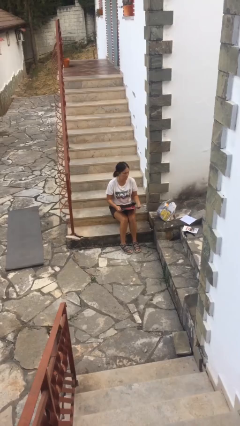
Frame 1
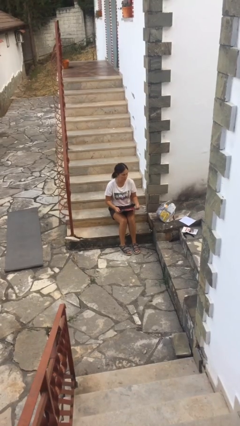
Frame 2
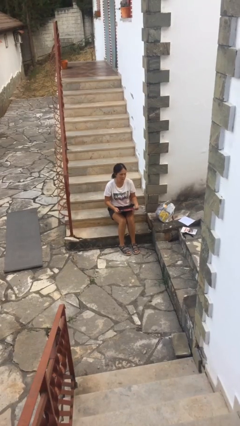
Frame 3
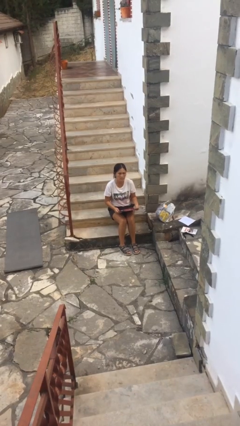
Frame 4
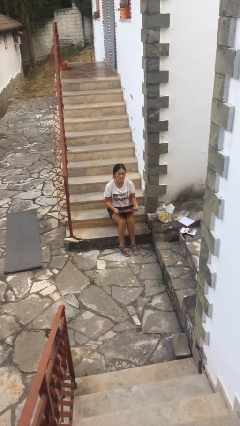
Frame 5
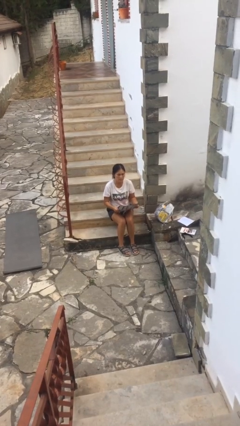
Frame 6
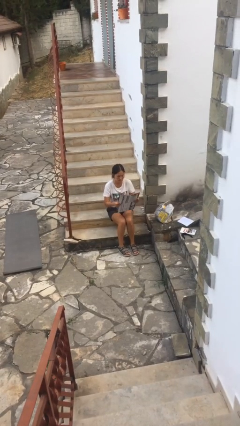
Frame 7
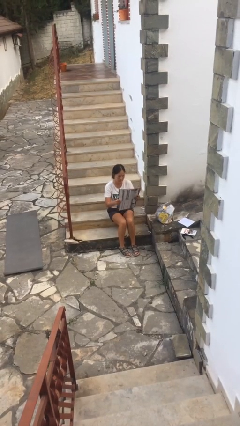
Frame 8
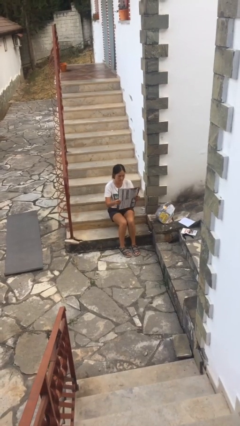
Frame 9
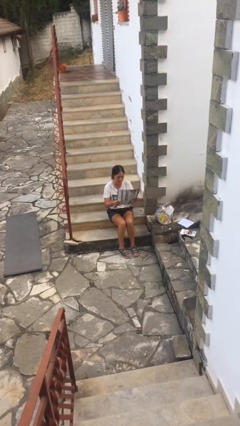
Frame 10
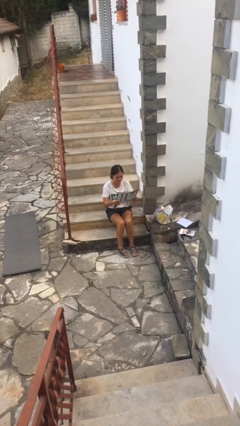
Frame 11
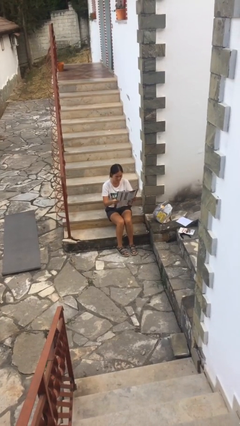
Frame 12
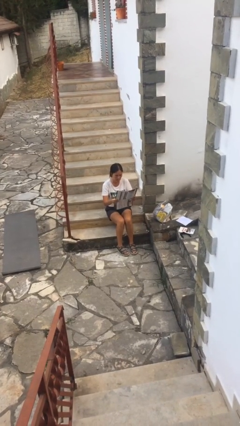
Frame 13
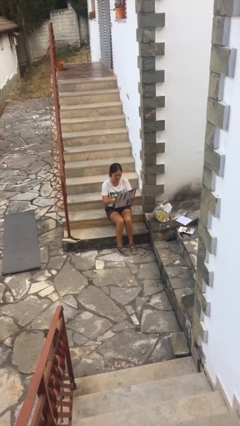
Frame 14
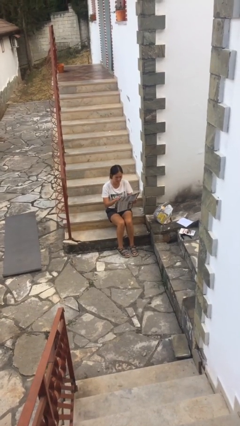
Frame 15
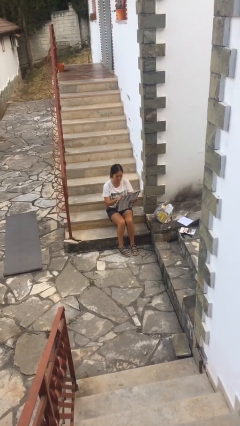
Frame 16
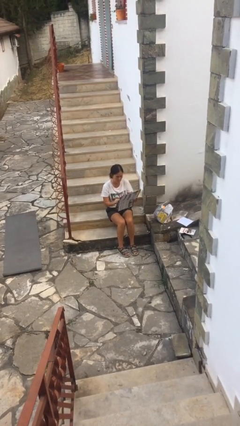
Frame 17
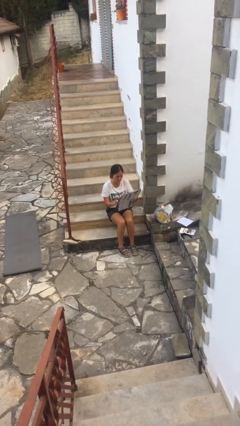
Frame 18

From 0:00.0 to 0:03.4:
person reads newspaper

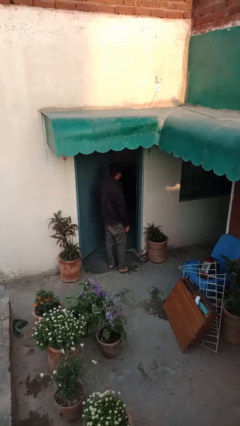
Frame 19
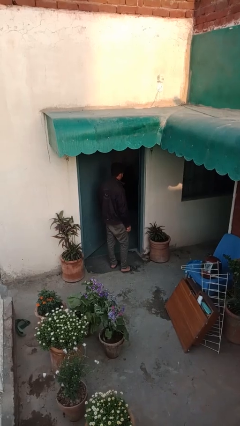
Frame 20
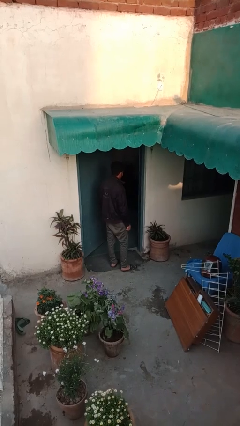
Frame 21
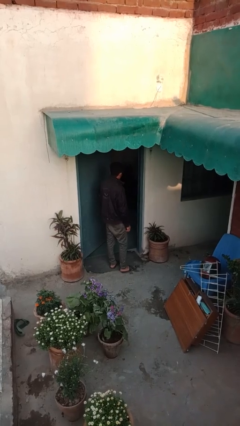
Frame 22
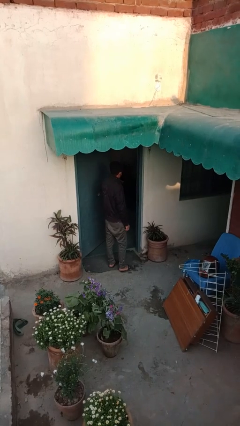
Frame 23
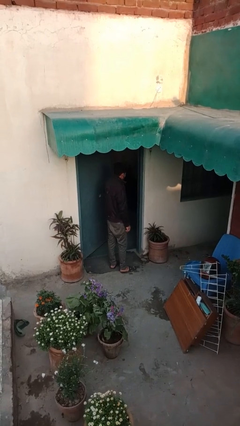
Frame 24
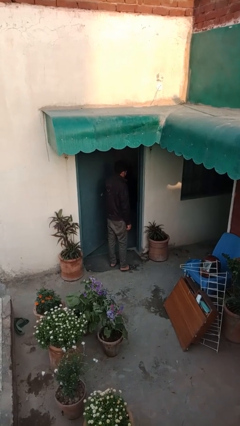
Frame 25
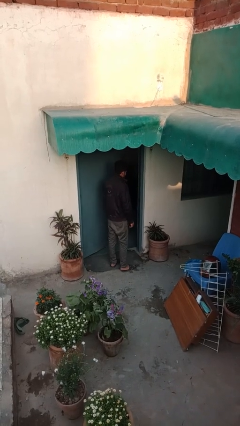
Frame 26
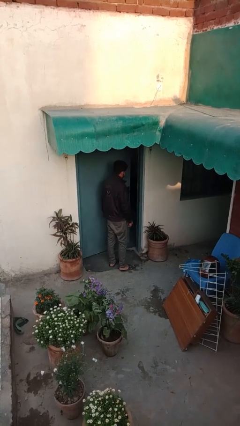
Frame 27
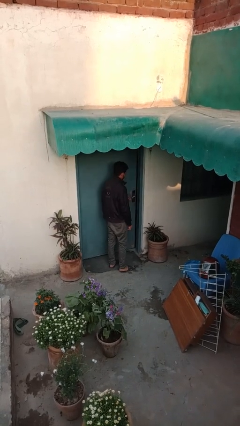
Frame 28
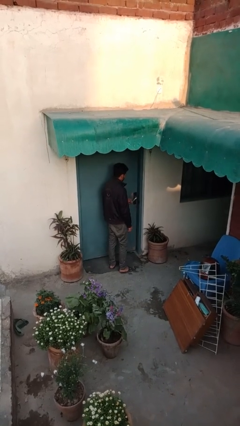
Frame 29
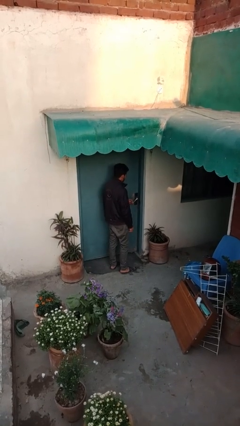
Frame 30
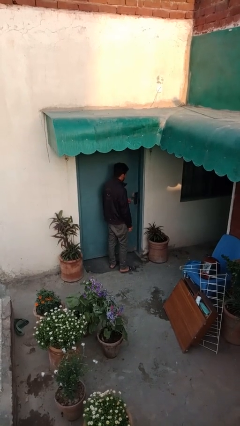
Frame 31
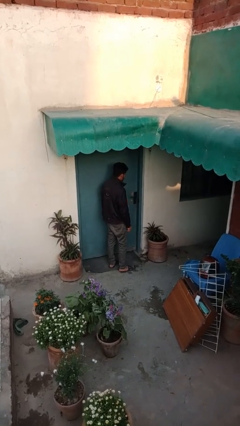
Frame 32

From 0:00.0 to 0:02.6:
person closes facility door

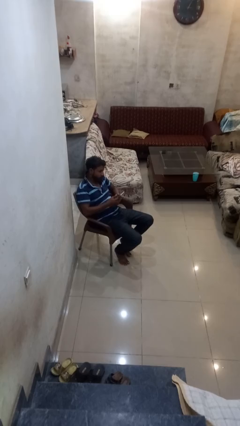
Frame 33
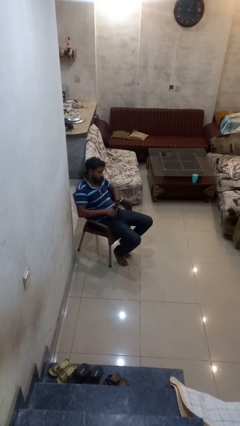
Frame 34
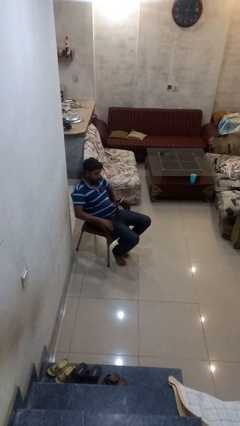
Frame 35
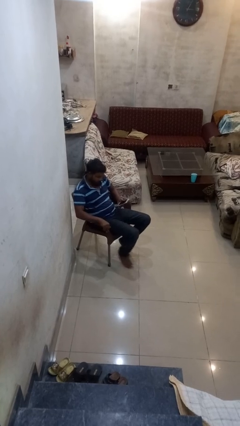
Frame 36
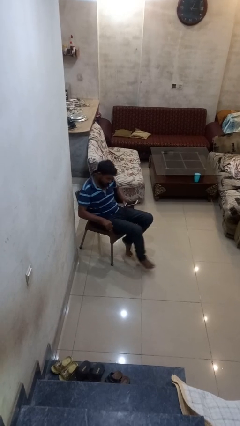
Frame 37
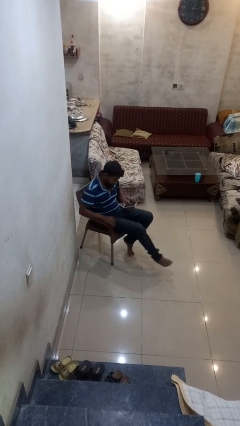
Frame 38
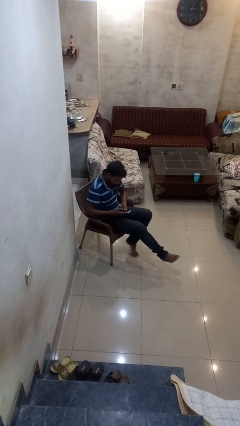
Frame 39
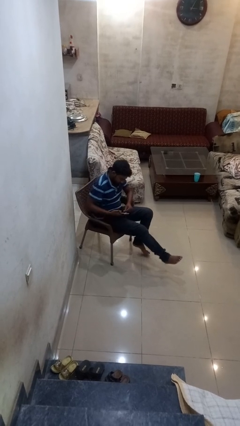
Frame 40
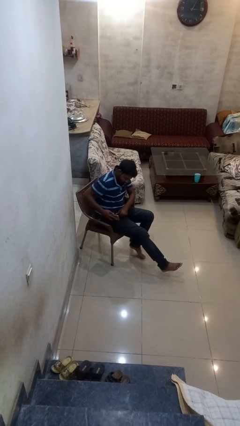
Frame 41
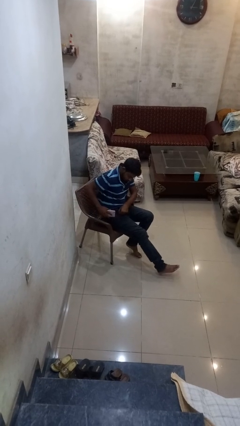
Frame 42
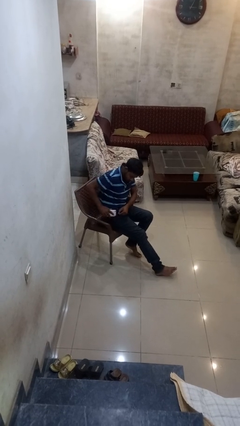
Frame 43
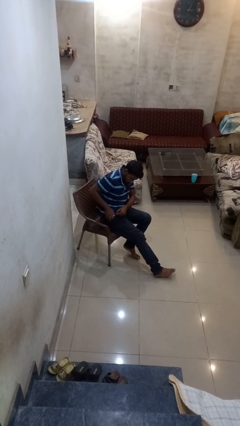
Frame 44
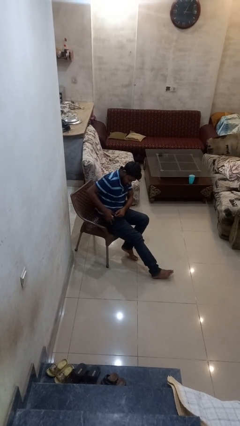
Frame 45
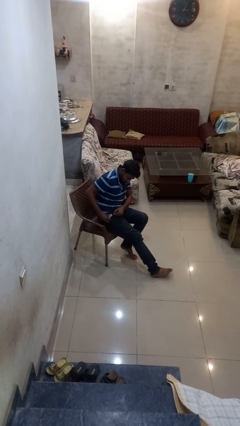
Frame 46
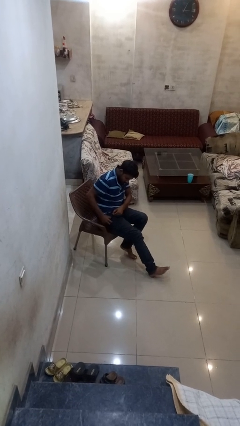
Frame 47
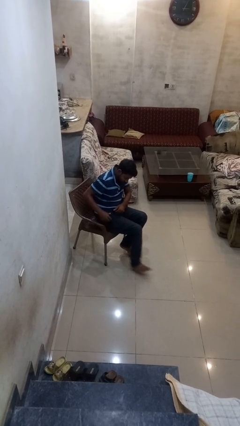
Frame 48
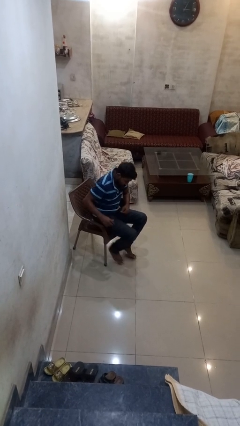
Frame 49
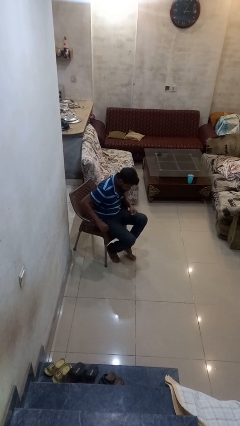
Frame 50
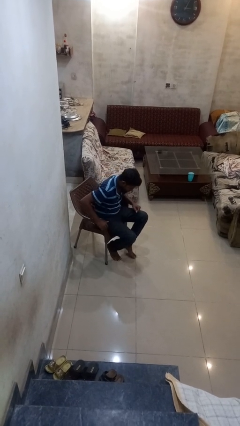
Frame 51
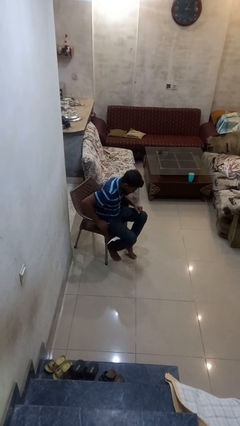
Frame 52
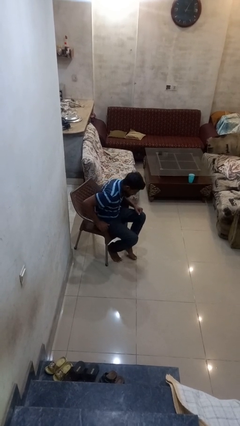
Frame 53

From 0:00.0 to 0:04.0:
person puts phone into pocket

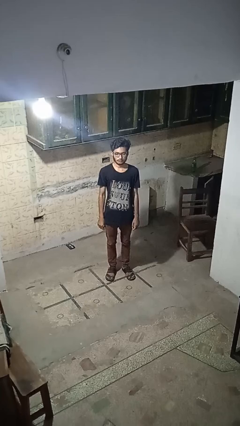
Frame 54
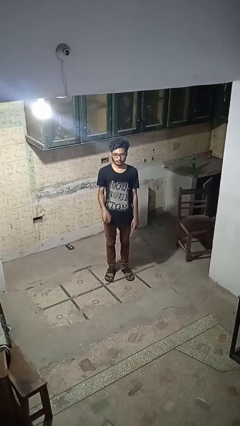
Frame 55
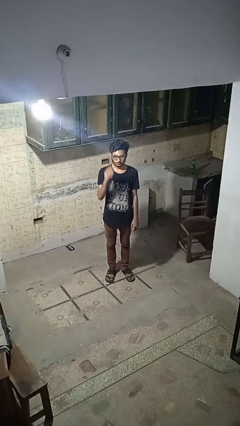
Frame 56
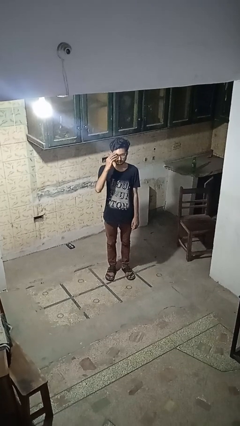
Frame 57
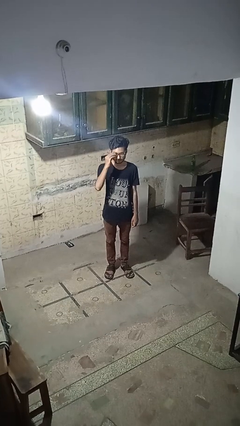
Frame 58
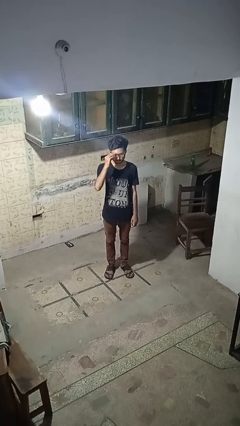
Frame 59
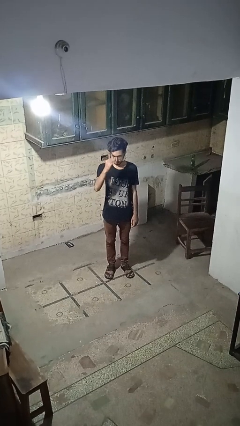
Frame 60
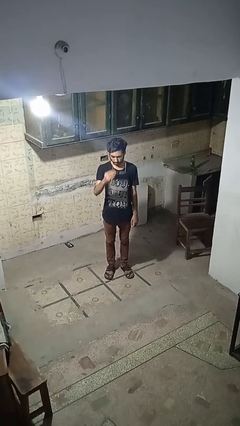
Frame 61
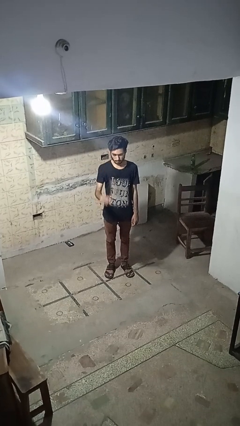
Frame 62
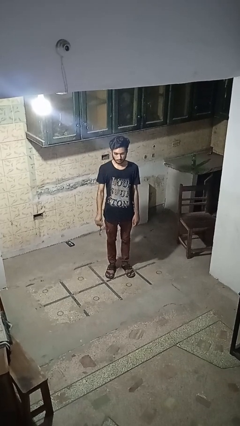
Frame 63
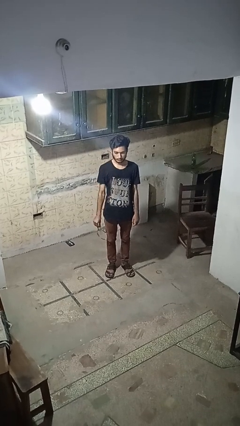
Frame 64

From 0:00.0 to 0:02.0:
person takes off glasses

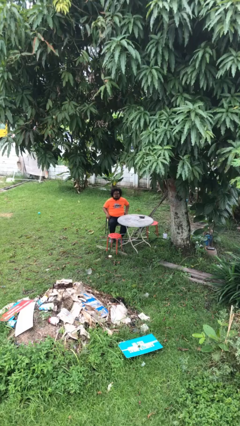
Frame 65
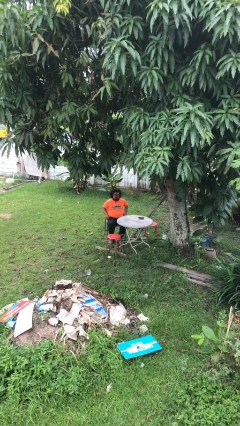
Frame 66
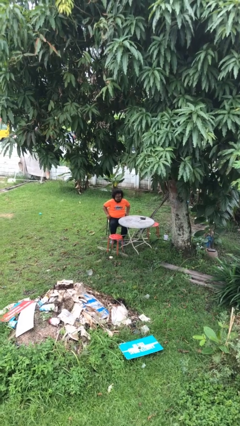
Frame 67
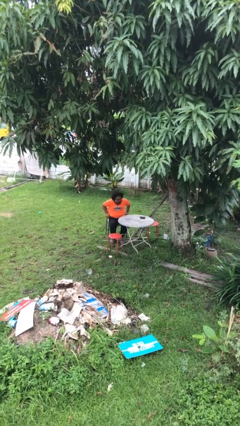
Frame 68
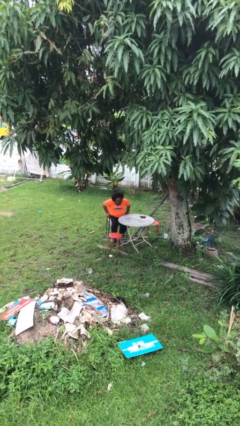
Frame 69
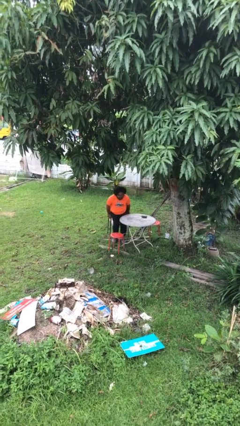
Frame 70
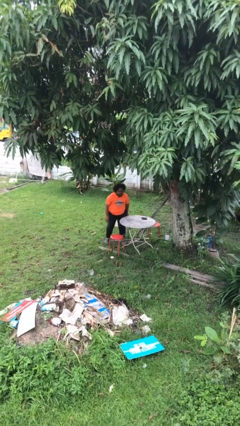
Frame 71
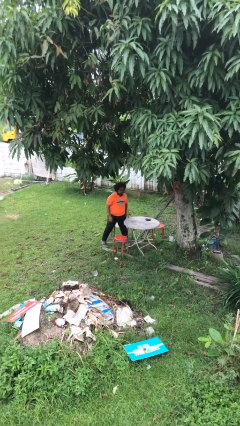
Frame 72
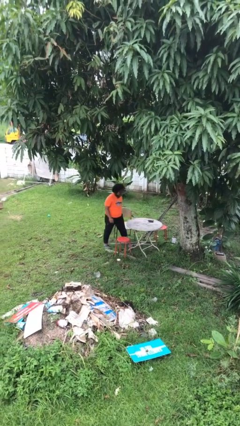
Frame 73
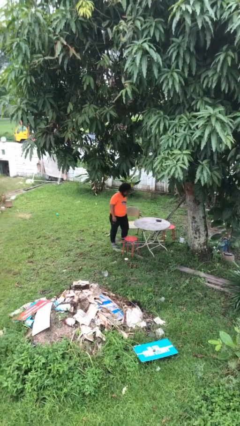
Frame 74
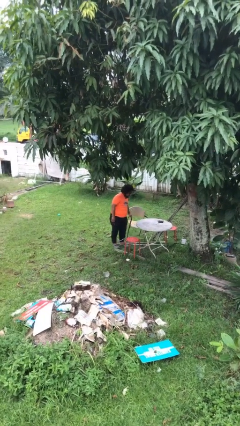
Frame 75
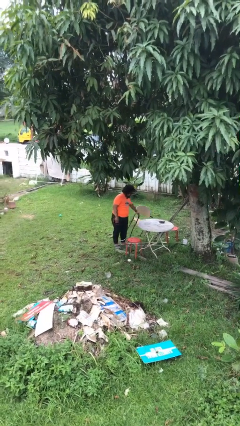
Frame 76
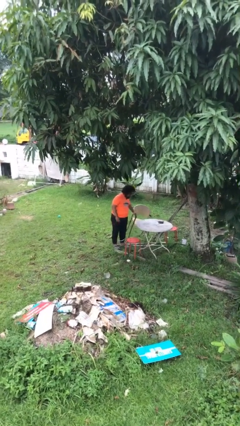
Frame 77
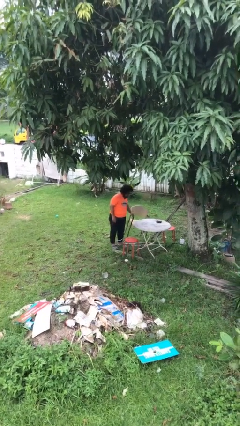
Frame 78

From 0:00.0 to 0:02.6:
person stands up

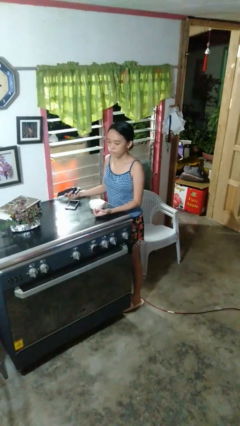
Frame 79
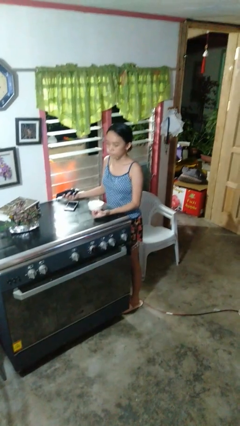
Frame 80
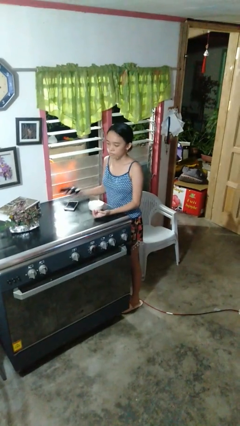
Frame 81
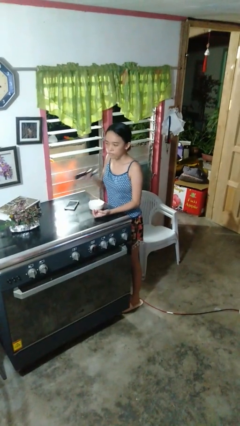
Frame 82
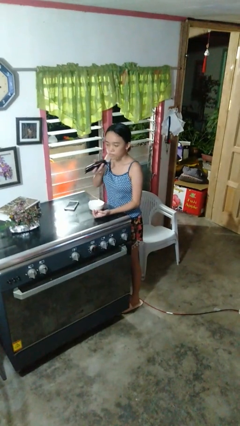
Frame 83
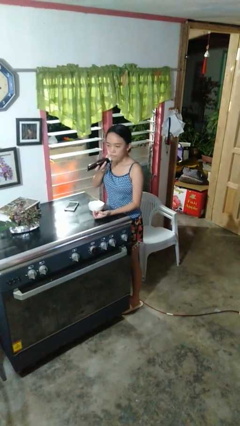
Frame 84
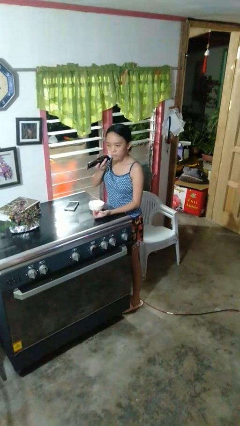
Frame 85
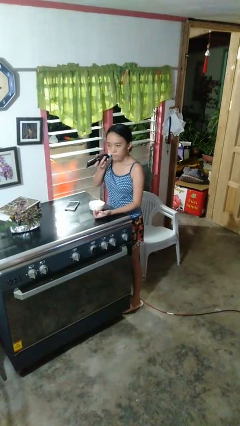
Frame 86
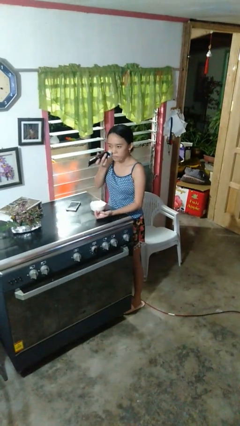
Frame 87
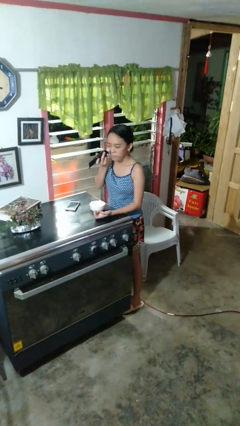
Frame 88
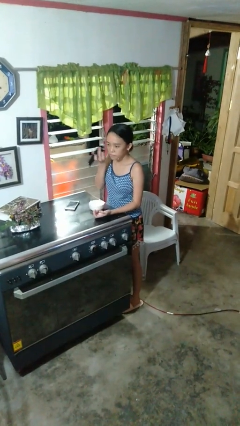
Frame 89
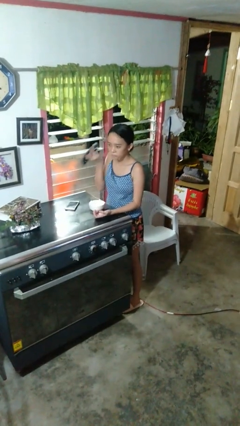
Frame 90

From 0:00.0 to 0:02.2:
person shaves face

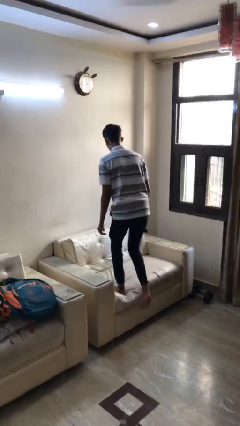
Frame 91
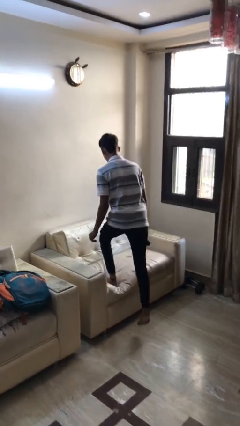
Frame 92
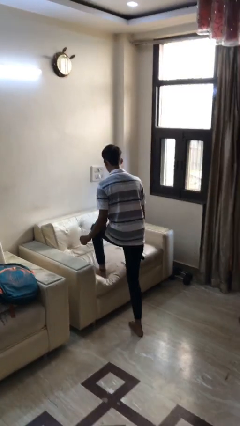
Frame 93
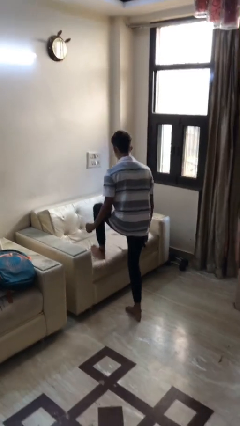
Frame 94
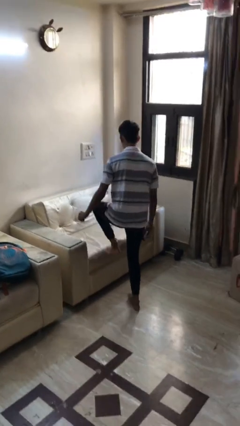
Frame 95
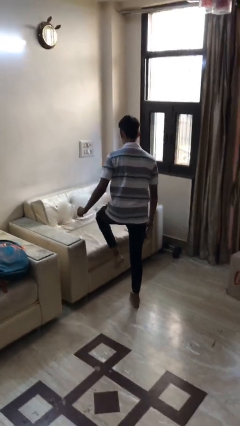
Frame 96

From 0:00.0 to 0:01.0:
person climbs off couch
